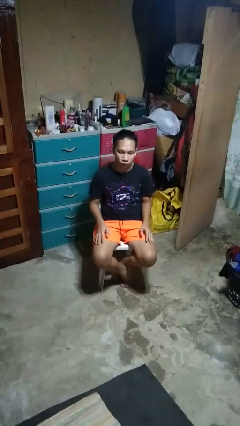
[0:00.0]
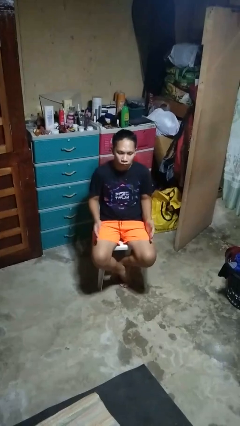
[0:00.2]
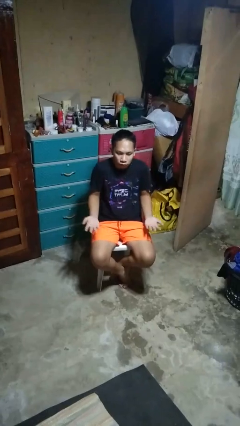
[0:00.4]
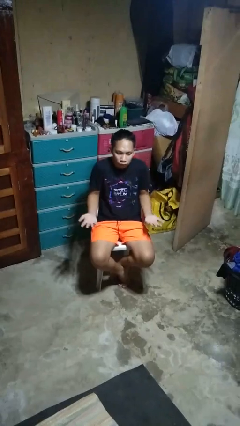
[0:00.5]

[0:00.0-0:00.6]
person shrugs

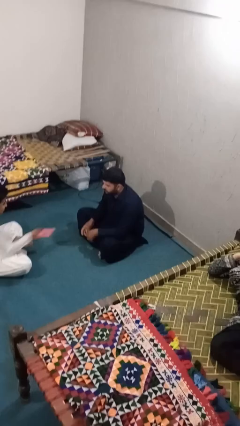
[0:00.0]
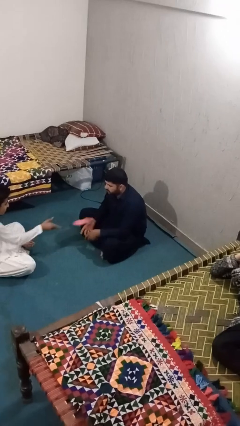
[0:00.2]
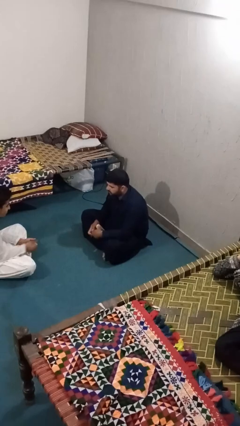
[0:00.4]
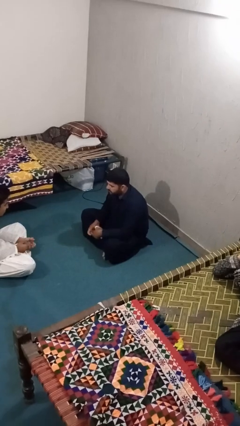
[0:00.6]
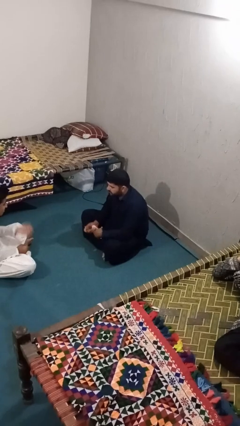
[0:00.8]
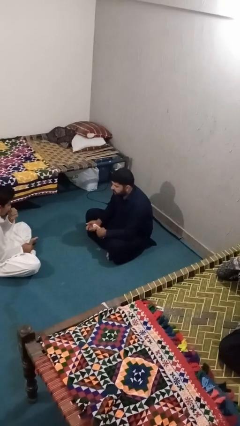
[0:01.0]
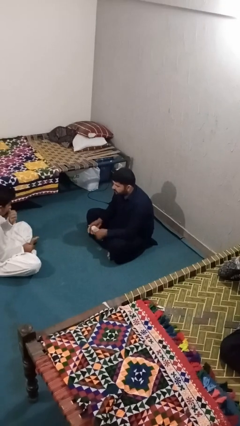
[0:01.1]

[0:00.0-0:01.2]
person catches object from person

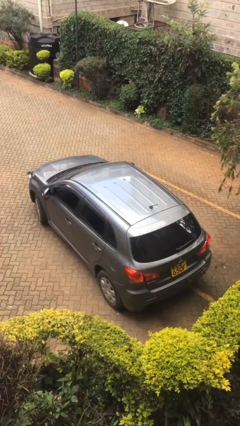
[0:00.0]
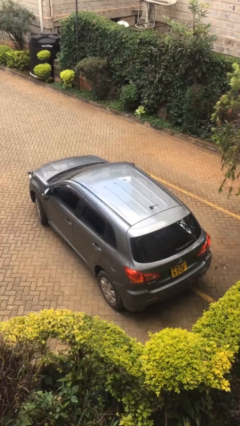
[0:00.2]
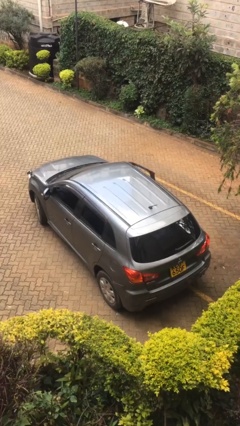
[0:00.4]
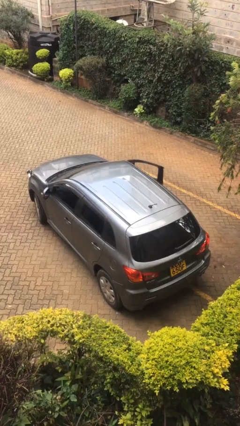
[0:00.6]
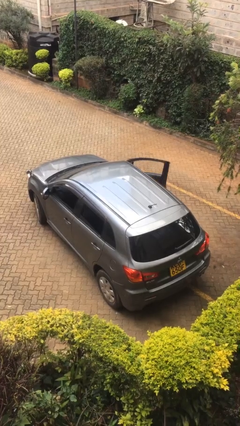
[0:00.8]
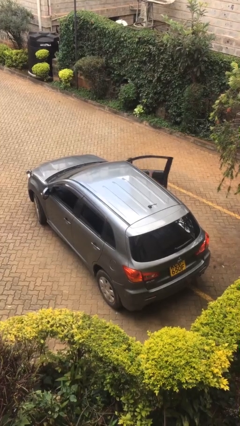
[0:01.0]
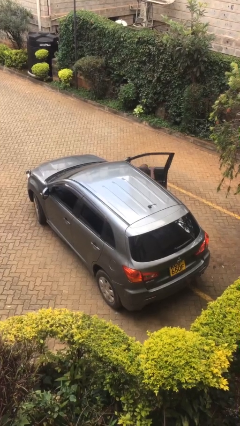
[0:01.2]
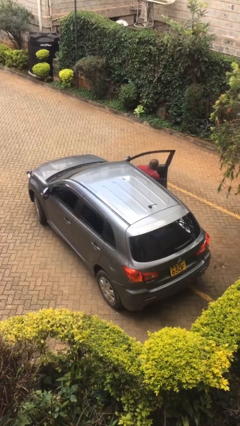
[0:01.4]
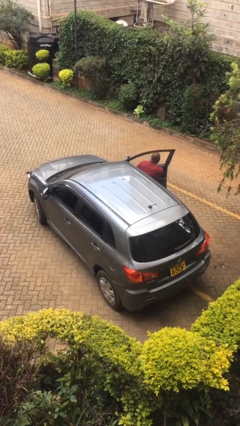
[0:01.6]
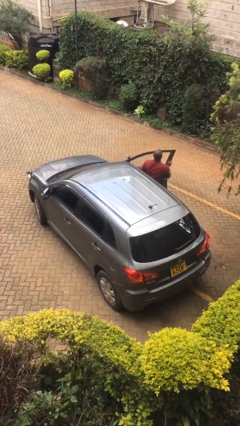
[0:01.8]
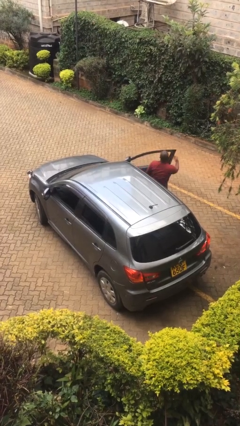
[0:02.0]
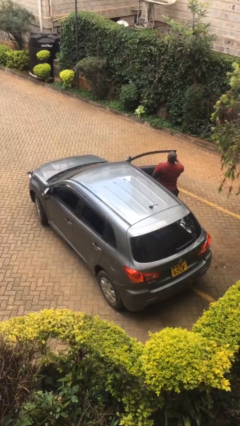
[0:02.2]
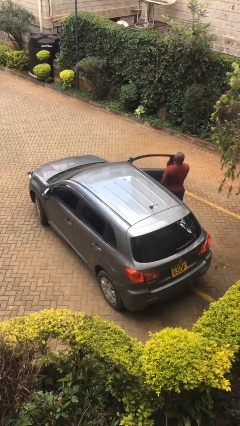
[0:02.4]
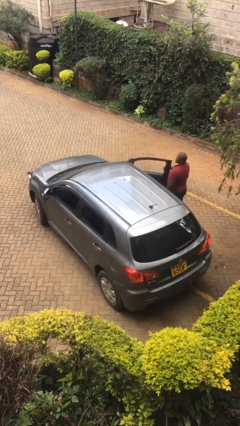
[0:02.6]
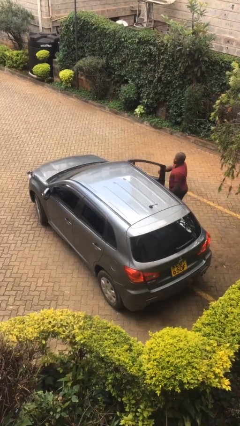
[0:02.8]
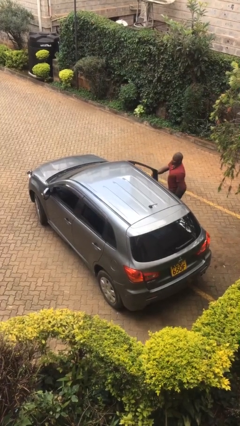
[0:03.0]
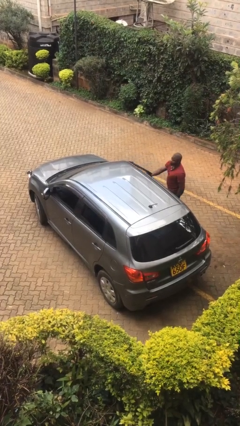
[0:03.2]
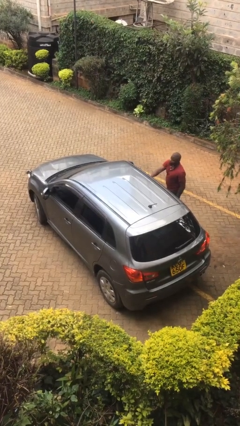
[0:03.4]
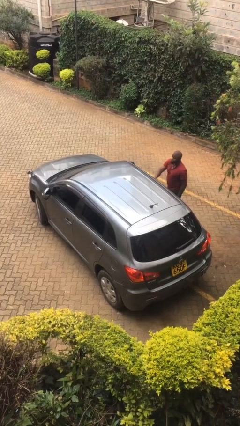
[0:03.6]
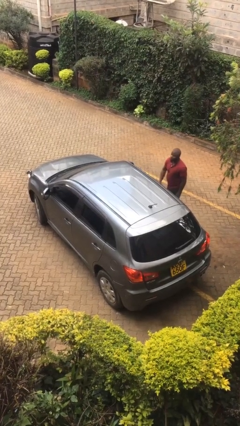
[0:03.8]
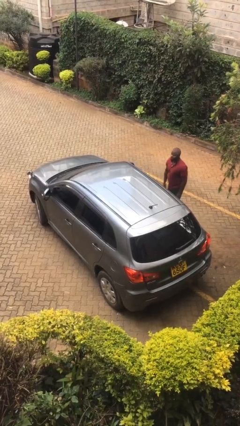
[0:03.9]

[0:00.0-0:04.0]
car drops off person

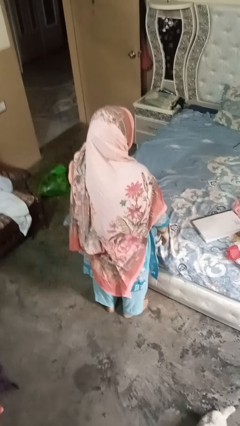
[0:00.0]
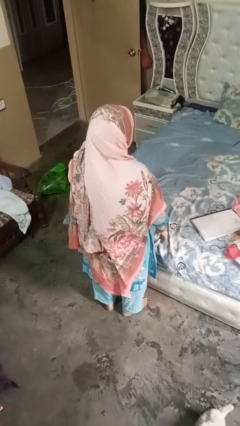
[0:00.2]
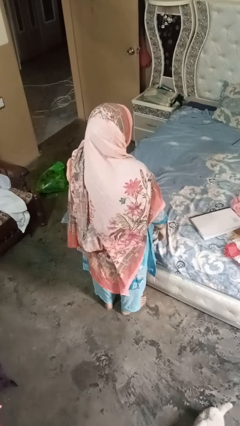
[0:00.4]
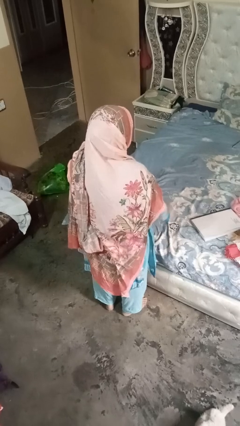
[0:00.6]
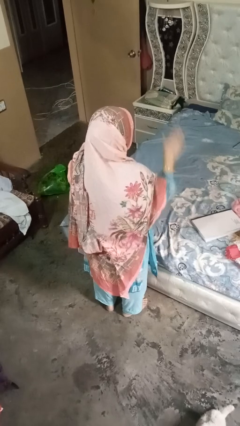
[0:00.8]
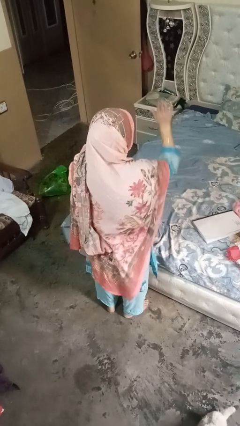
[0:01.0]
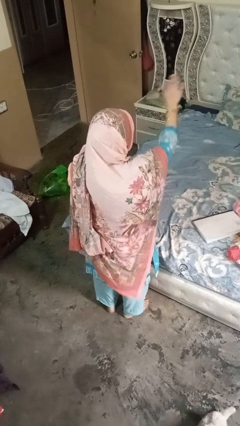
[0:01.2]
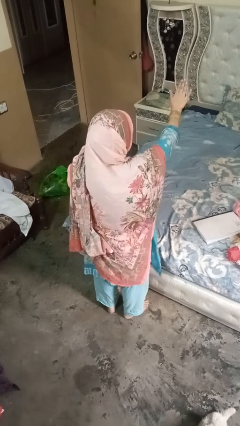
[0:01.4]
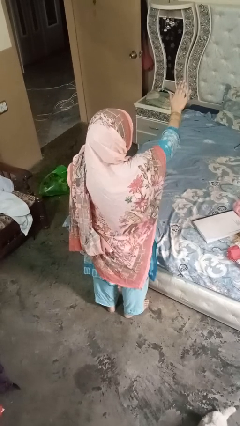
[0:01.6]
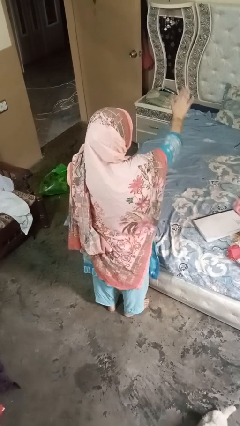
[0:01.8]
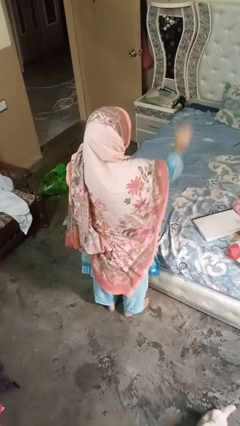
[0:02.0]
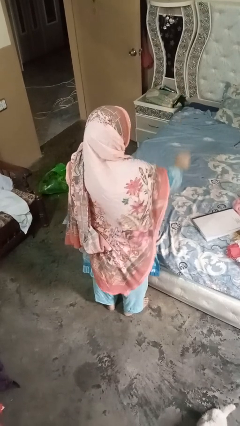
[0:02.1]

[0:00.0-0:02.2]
person gestures stop

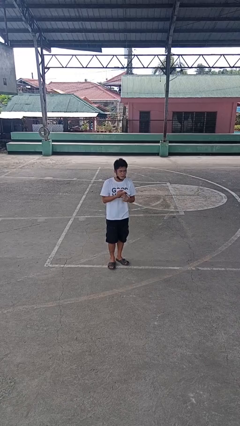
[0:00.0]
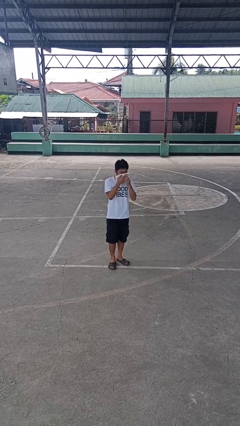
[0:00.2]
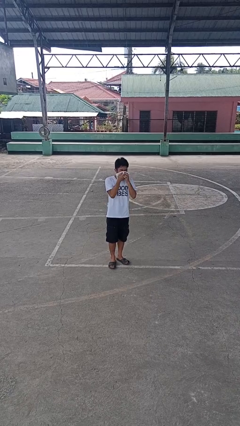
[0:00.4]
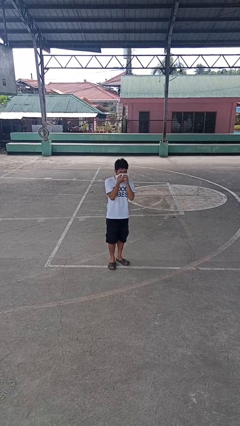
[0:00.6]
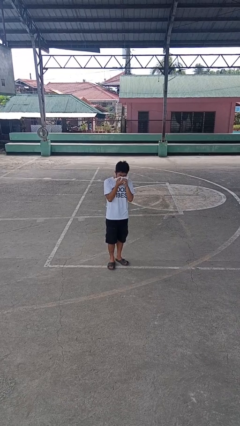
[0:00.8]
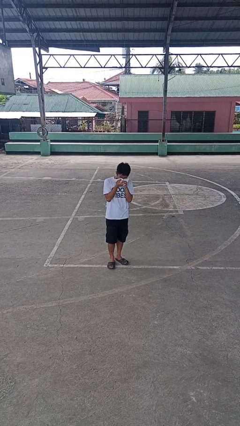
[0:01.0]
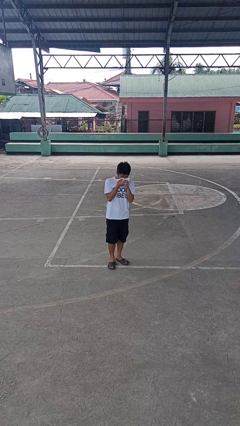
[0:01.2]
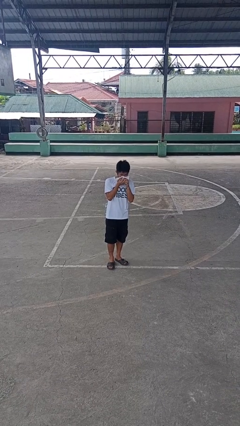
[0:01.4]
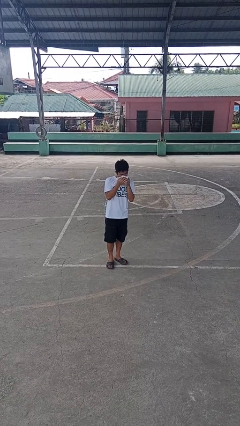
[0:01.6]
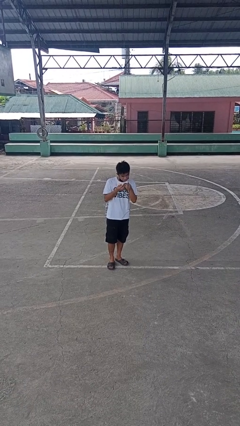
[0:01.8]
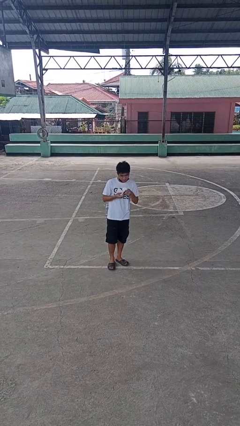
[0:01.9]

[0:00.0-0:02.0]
person blows nose

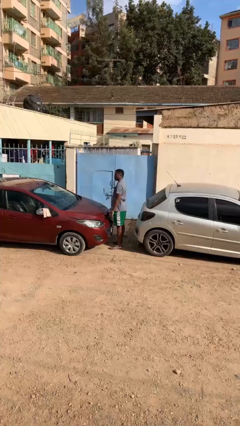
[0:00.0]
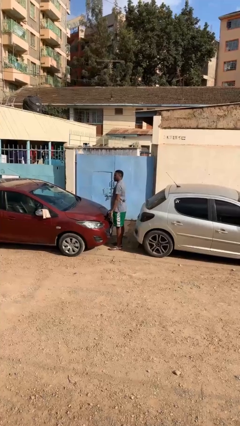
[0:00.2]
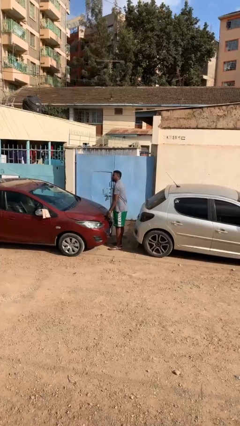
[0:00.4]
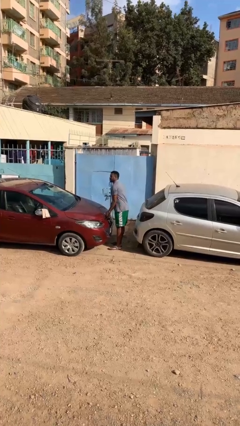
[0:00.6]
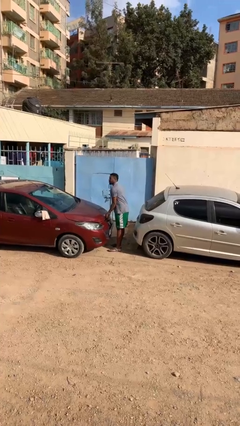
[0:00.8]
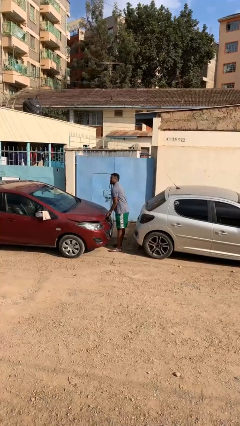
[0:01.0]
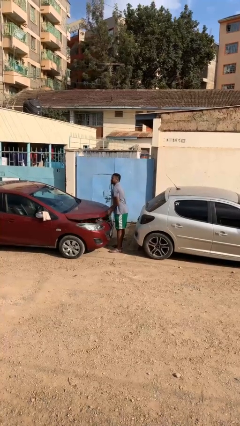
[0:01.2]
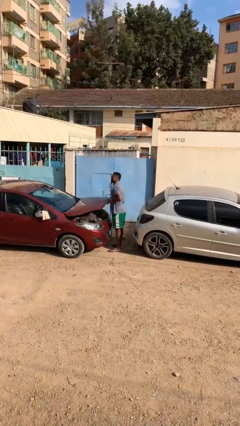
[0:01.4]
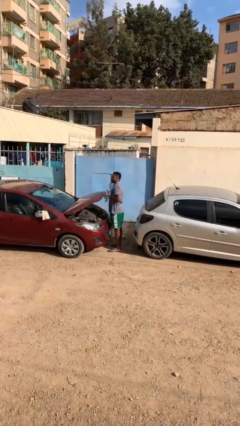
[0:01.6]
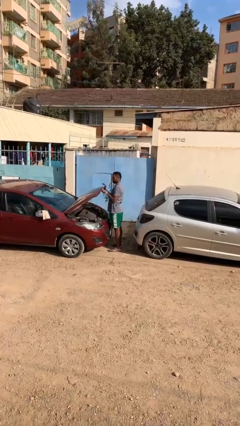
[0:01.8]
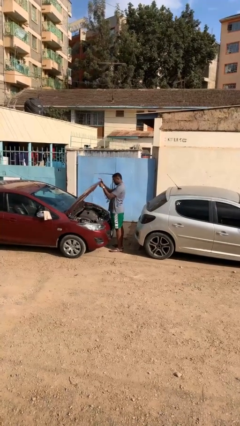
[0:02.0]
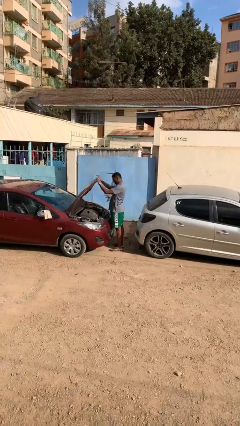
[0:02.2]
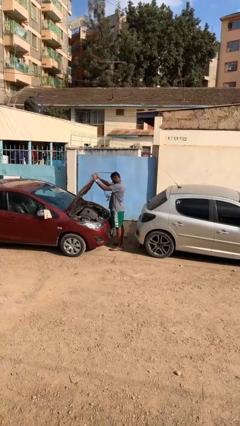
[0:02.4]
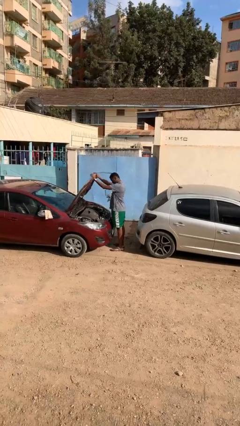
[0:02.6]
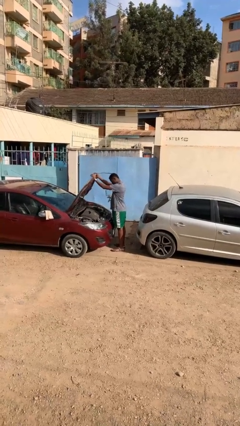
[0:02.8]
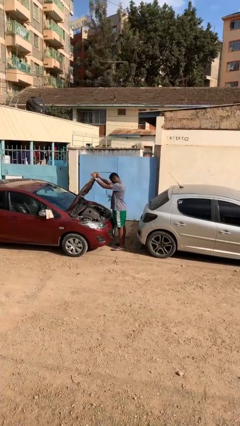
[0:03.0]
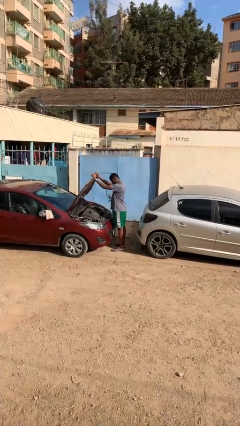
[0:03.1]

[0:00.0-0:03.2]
person opens car hood

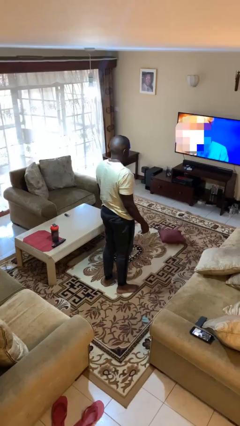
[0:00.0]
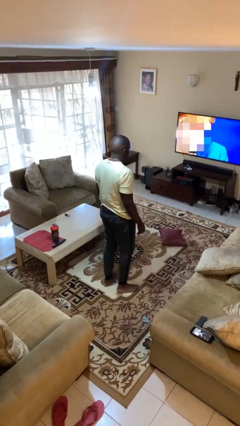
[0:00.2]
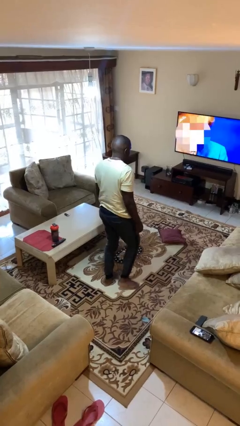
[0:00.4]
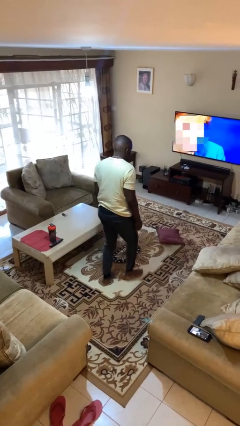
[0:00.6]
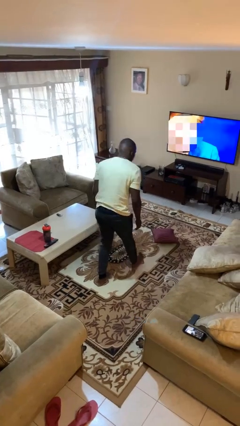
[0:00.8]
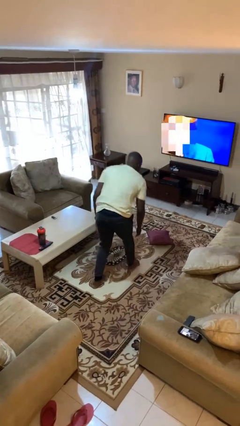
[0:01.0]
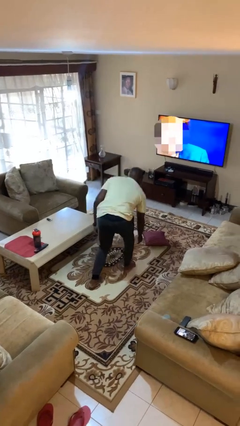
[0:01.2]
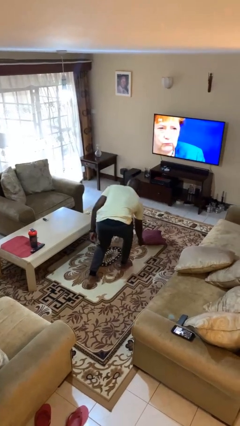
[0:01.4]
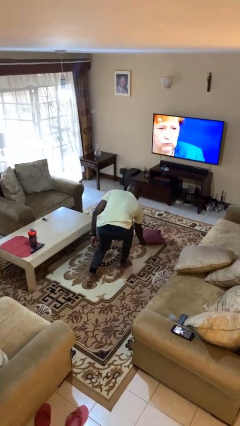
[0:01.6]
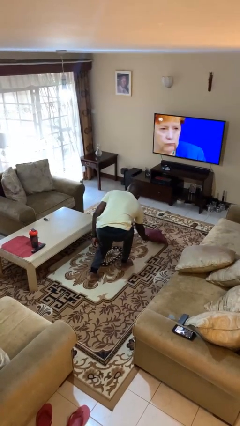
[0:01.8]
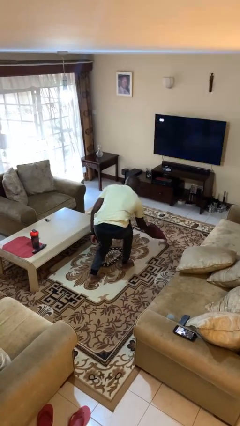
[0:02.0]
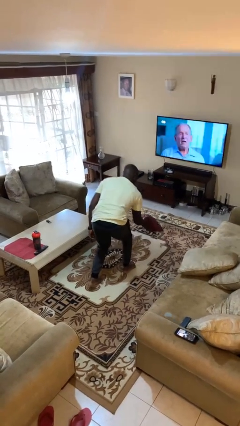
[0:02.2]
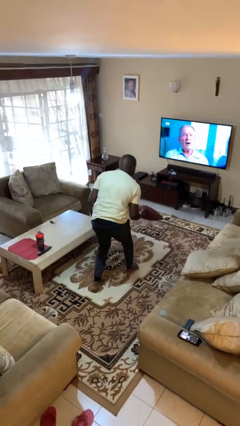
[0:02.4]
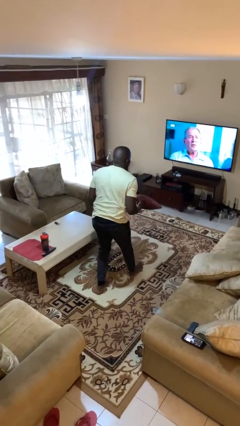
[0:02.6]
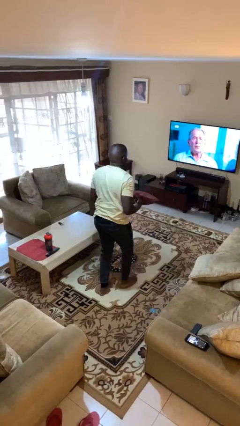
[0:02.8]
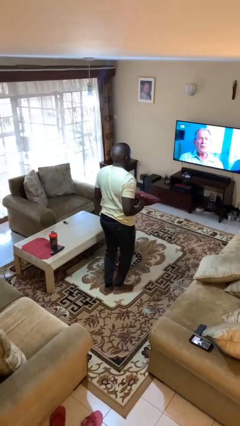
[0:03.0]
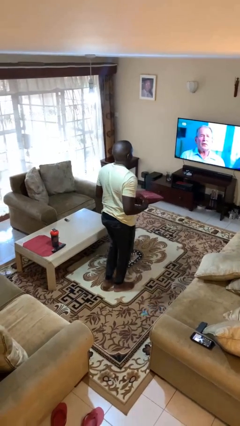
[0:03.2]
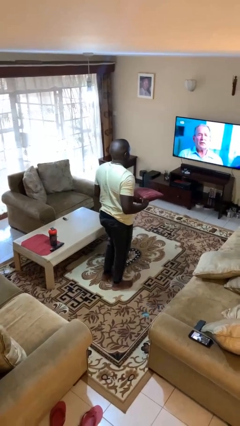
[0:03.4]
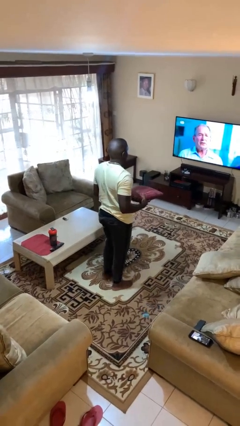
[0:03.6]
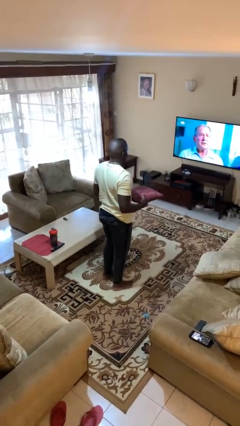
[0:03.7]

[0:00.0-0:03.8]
person picks up object from floor
